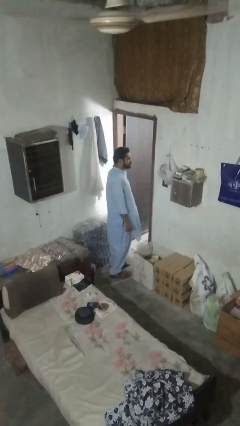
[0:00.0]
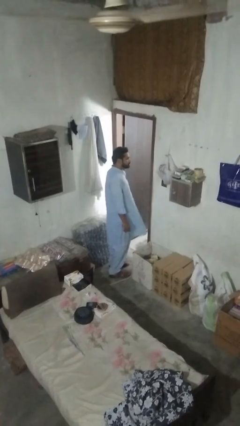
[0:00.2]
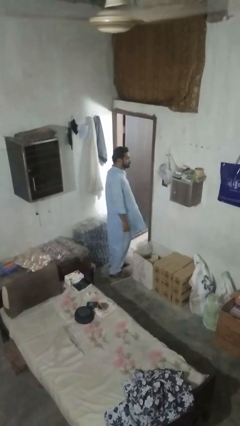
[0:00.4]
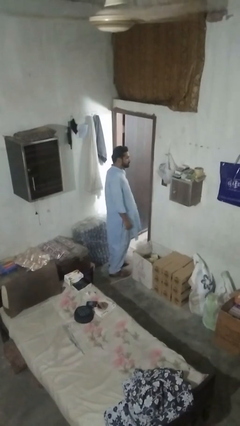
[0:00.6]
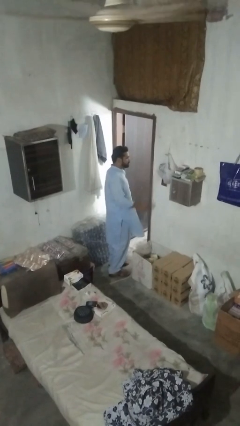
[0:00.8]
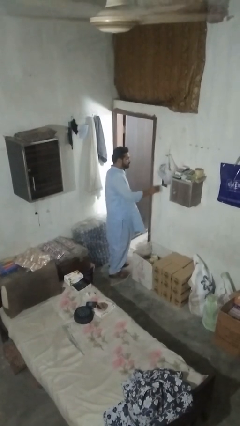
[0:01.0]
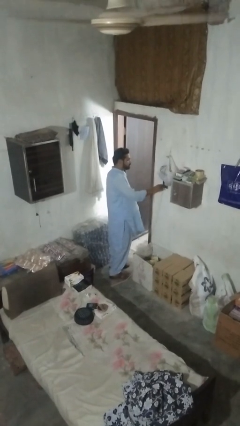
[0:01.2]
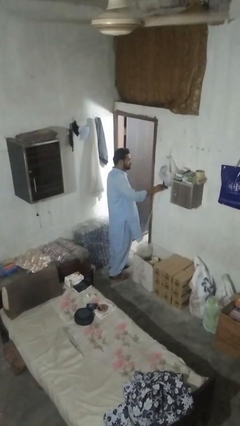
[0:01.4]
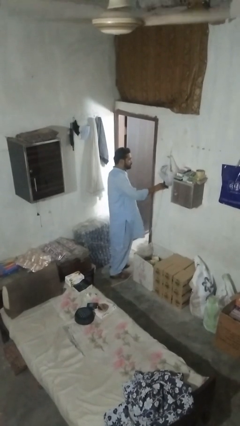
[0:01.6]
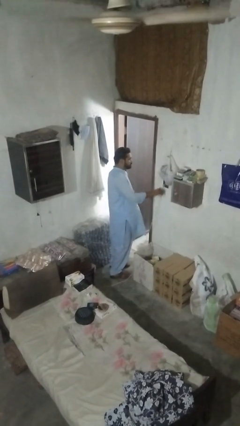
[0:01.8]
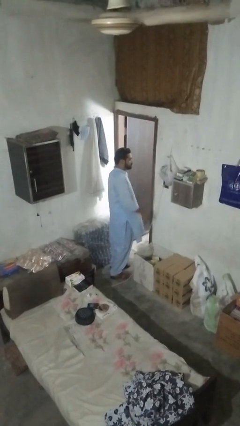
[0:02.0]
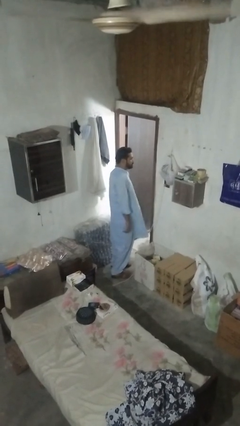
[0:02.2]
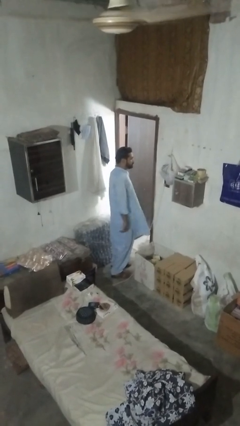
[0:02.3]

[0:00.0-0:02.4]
person plugs into electrical socket

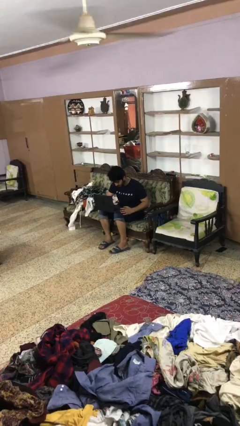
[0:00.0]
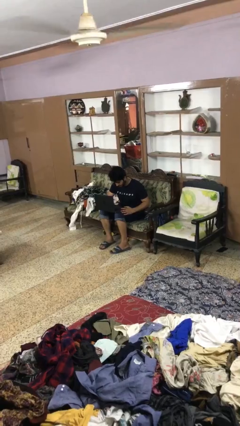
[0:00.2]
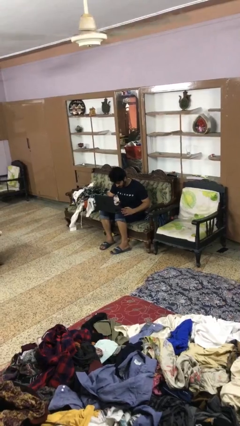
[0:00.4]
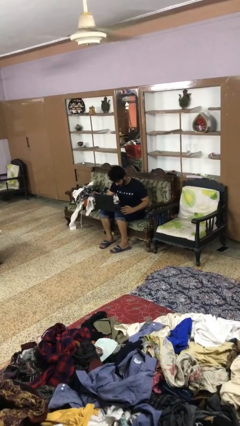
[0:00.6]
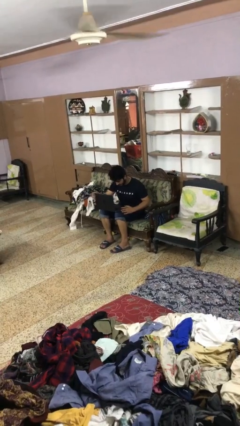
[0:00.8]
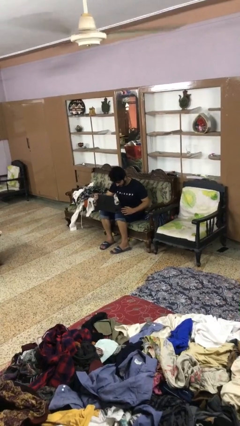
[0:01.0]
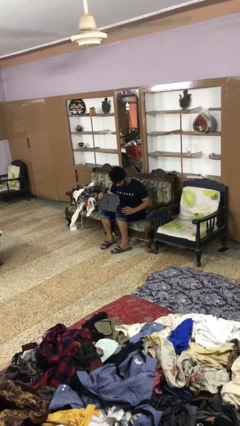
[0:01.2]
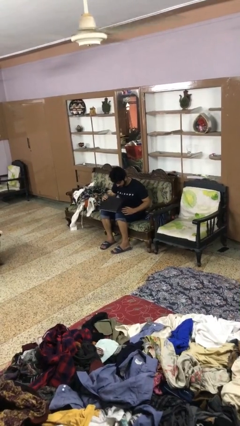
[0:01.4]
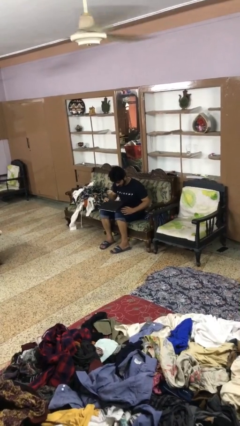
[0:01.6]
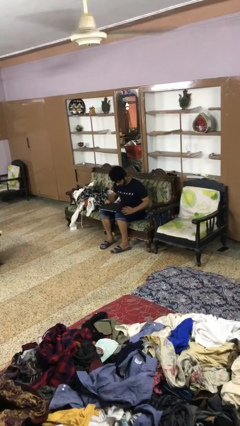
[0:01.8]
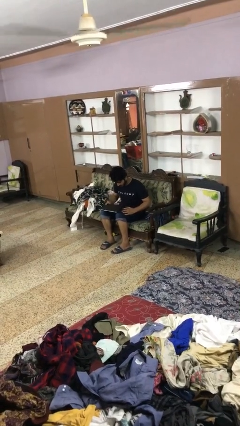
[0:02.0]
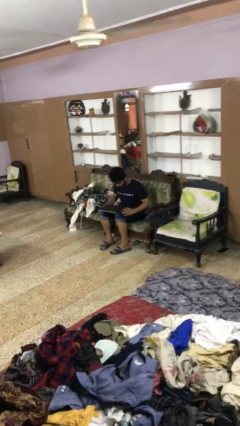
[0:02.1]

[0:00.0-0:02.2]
person closes laptop

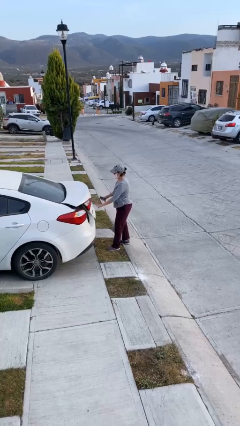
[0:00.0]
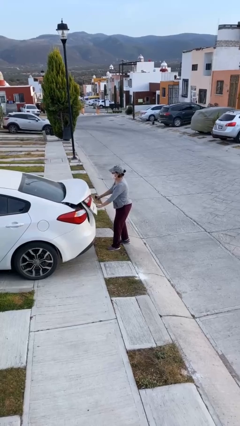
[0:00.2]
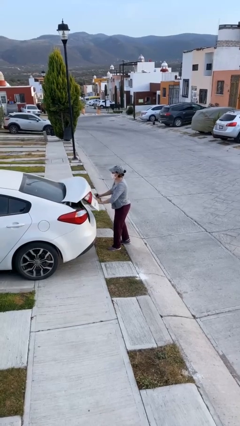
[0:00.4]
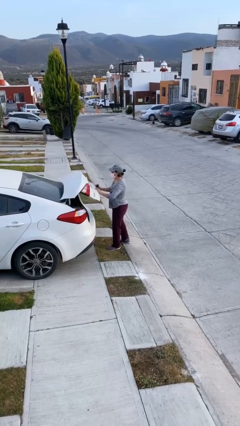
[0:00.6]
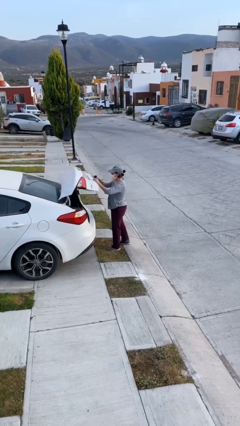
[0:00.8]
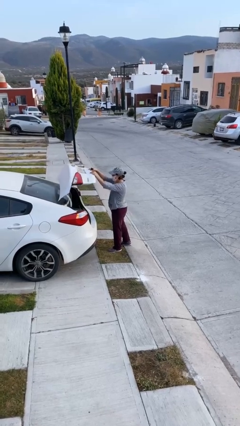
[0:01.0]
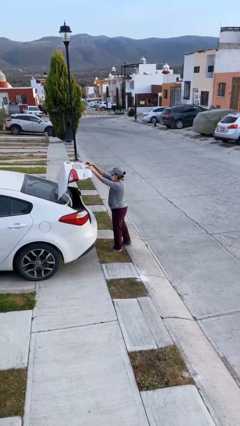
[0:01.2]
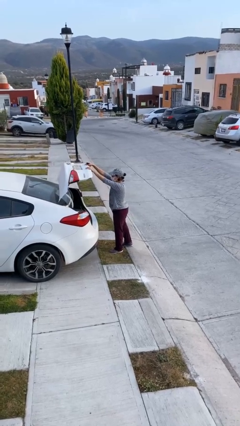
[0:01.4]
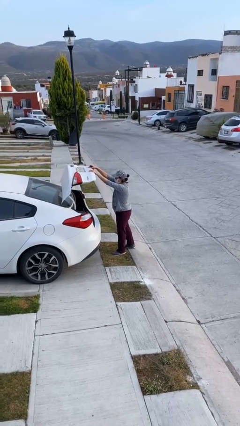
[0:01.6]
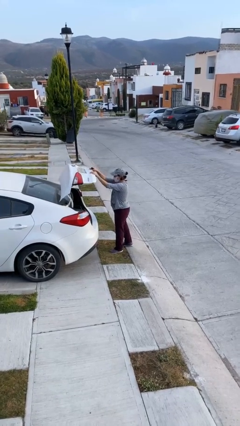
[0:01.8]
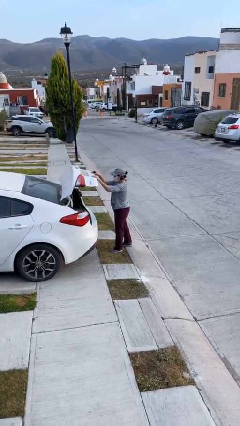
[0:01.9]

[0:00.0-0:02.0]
person opens car trunk

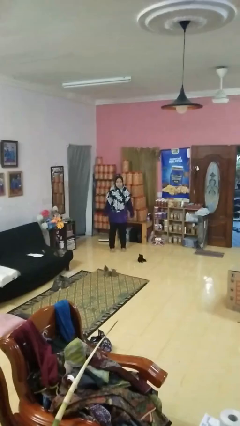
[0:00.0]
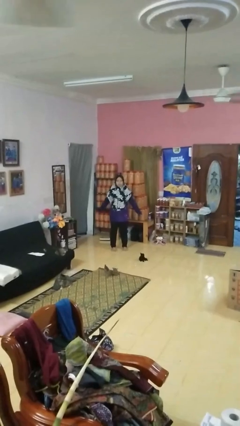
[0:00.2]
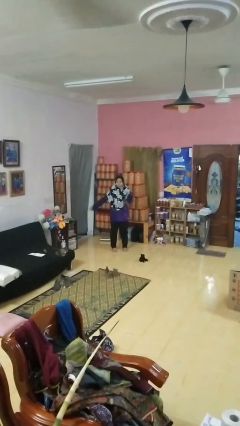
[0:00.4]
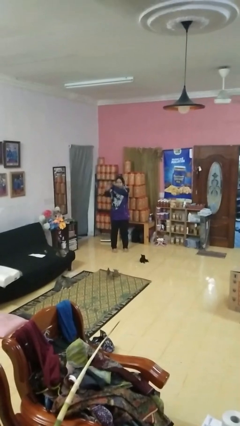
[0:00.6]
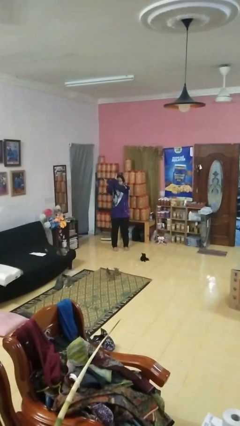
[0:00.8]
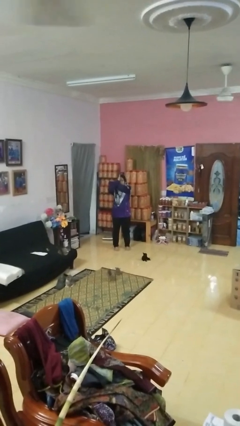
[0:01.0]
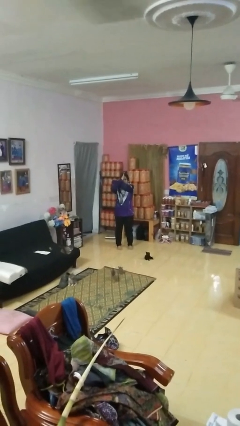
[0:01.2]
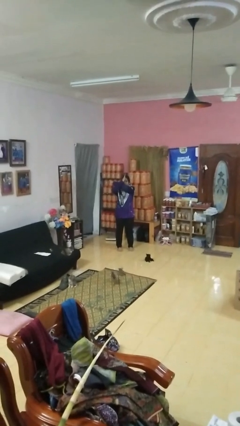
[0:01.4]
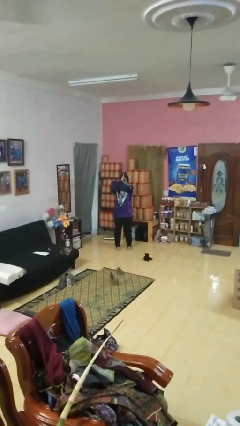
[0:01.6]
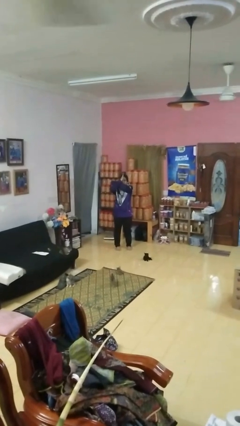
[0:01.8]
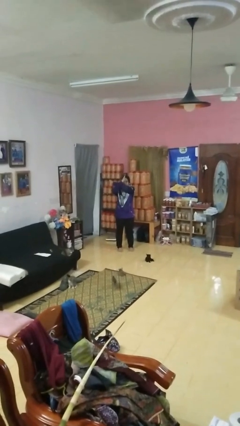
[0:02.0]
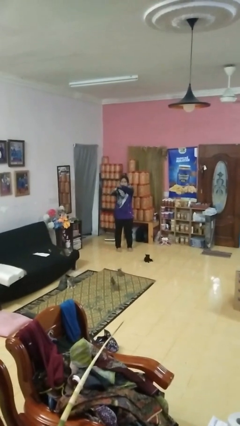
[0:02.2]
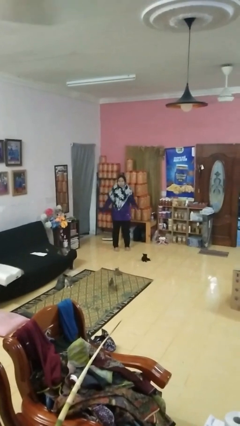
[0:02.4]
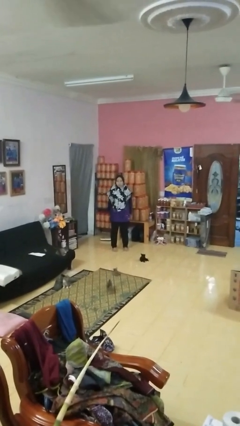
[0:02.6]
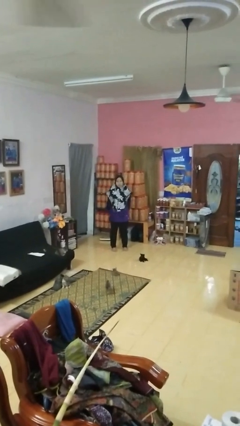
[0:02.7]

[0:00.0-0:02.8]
person gestures arms x

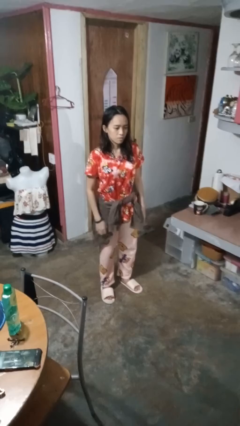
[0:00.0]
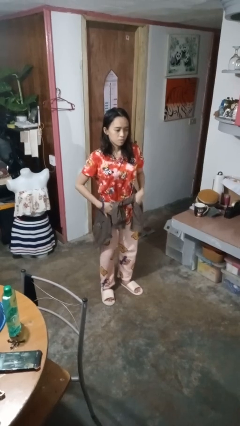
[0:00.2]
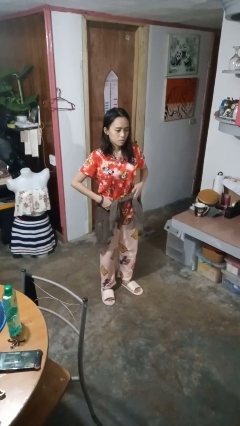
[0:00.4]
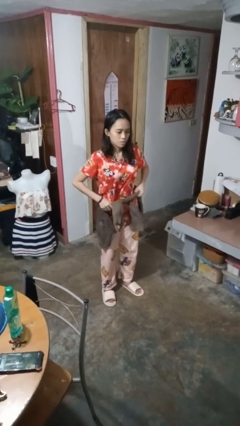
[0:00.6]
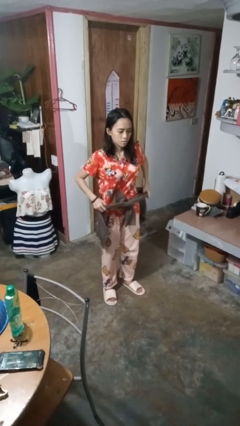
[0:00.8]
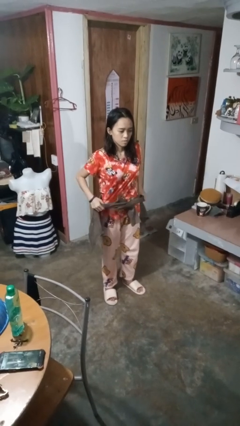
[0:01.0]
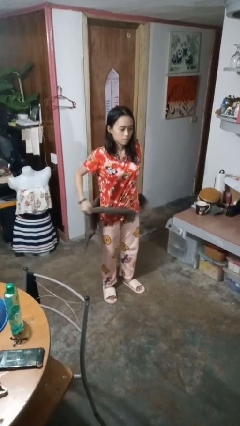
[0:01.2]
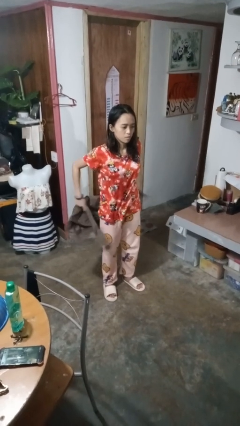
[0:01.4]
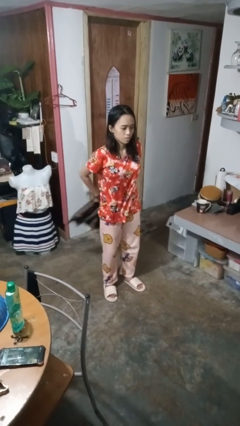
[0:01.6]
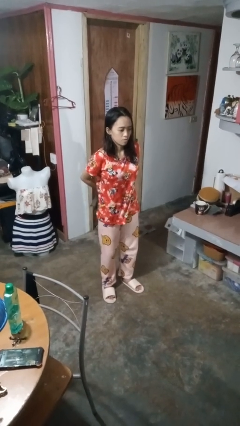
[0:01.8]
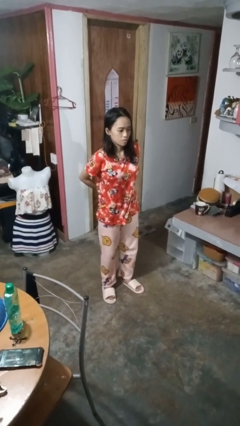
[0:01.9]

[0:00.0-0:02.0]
person unties jacket around waist

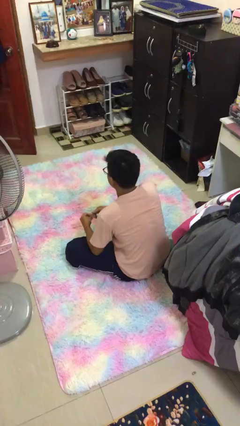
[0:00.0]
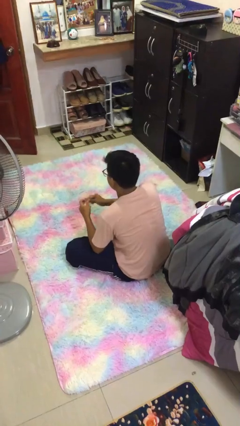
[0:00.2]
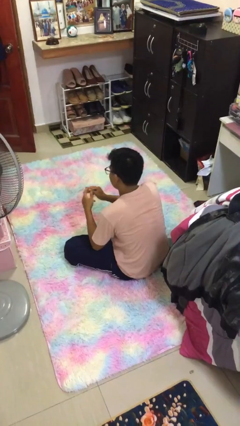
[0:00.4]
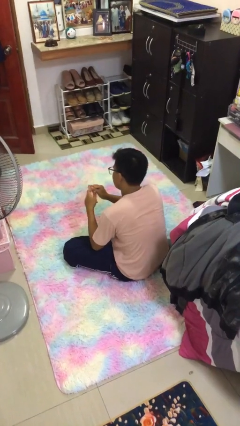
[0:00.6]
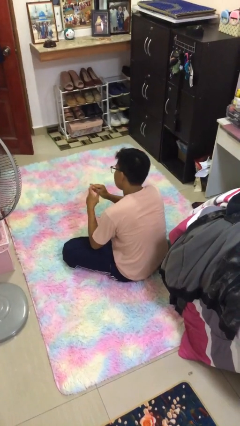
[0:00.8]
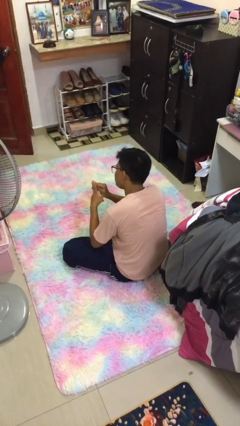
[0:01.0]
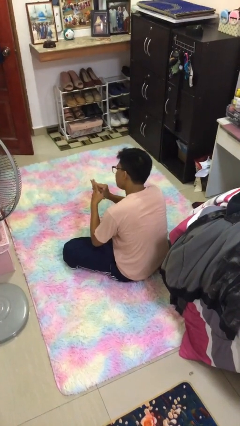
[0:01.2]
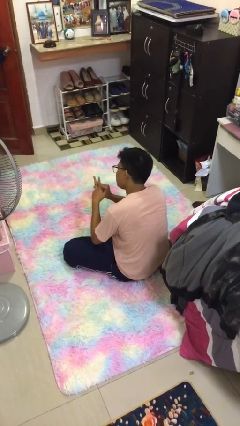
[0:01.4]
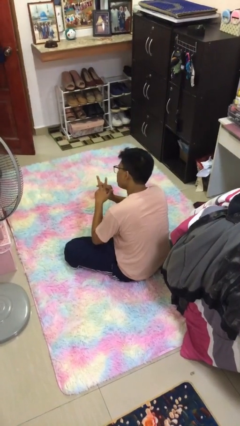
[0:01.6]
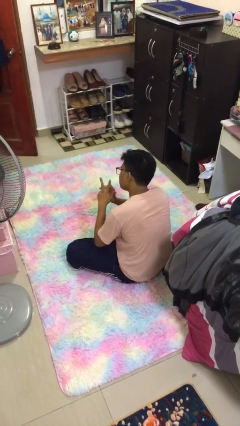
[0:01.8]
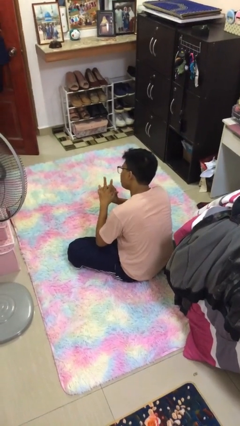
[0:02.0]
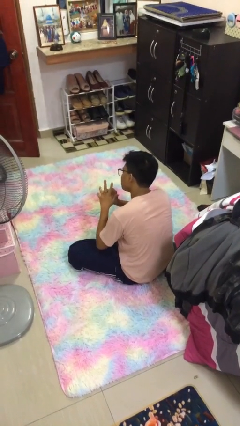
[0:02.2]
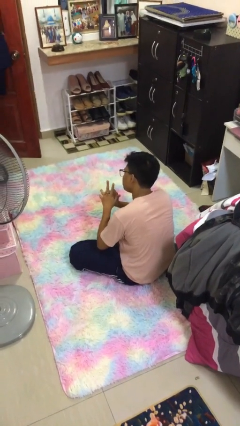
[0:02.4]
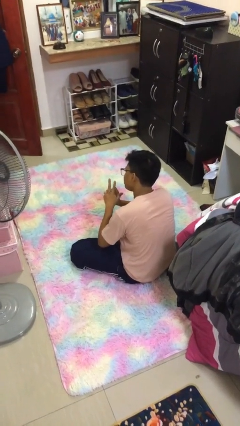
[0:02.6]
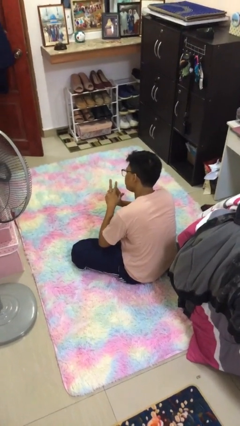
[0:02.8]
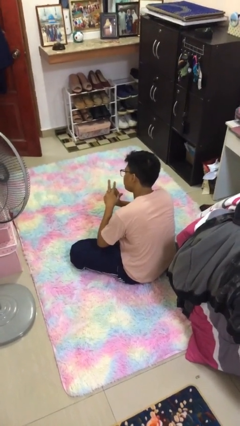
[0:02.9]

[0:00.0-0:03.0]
person puts on ring

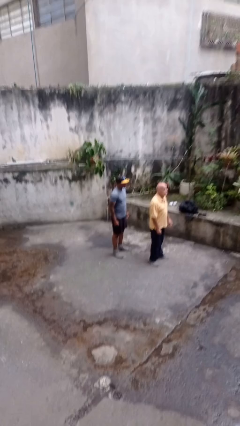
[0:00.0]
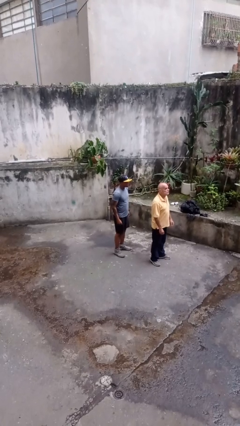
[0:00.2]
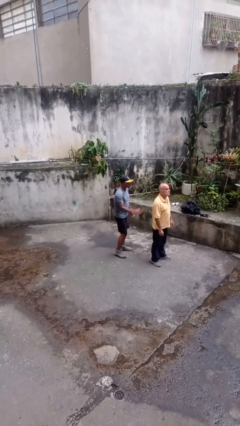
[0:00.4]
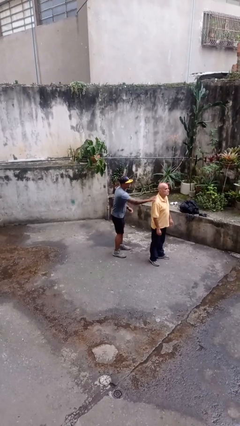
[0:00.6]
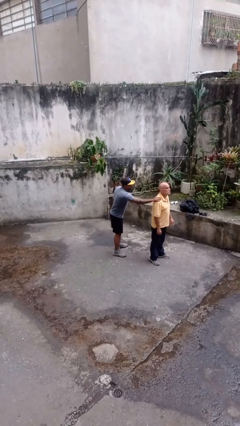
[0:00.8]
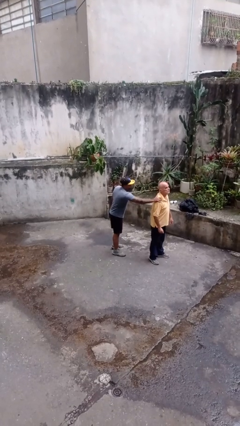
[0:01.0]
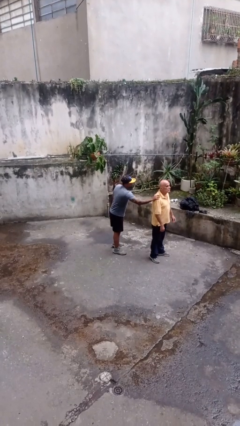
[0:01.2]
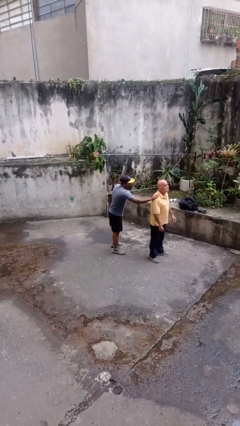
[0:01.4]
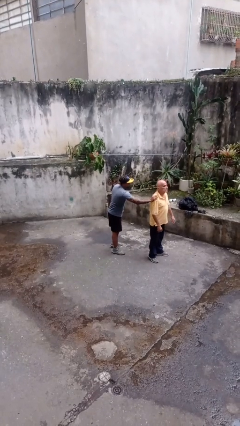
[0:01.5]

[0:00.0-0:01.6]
person grabs person by shoulder

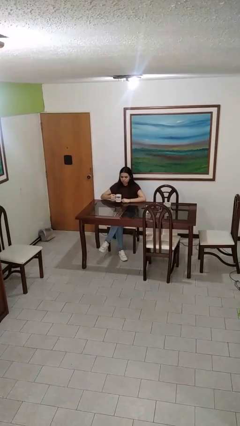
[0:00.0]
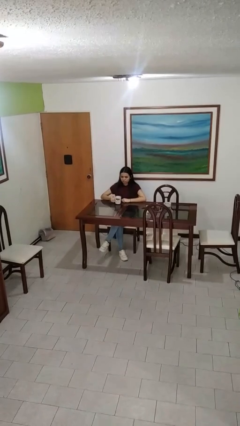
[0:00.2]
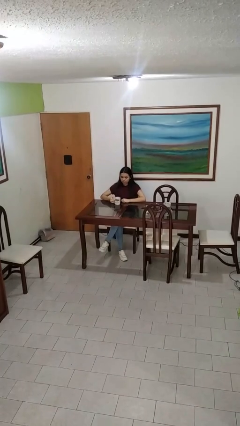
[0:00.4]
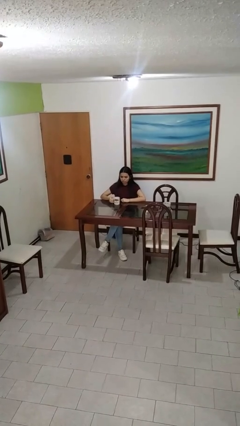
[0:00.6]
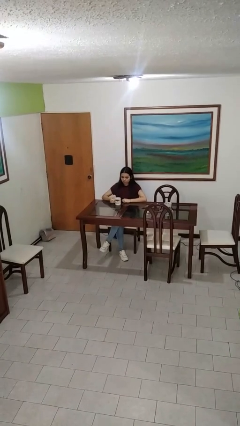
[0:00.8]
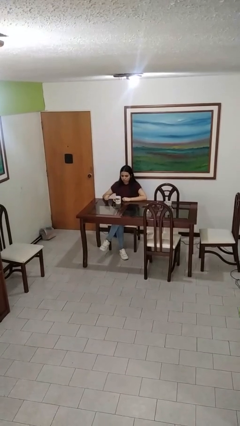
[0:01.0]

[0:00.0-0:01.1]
person puts down object on table
